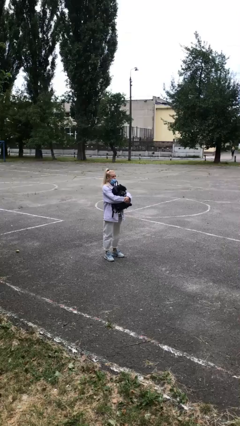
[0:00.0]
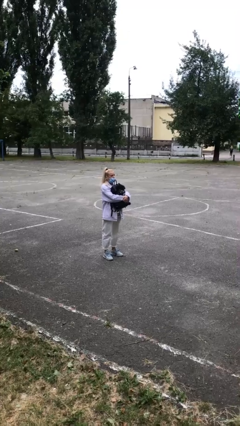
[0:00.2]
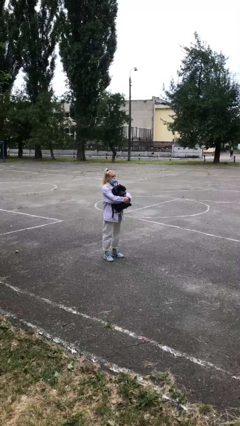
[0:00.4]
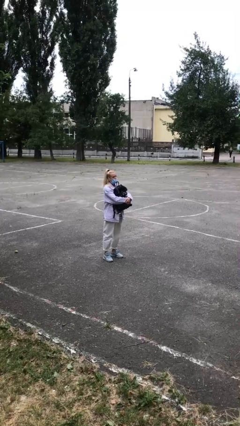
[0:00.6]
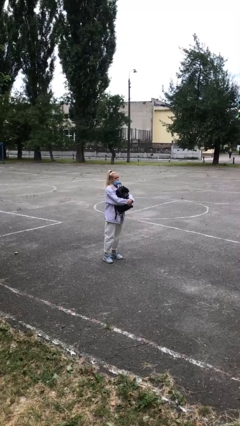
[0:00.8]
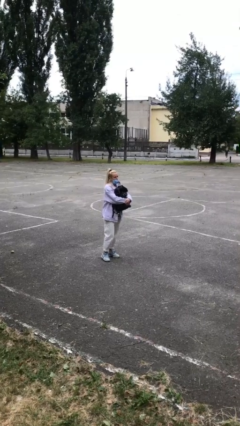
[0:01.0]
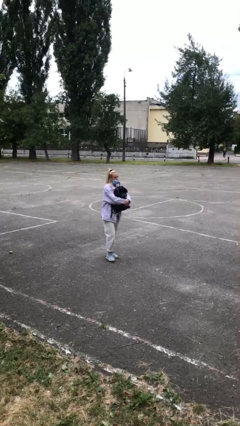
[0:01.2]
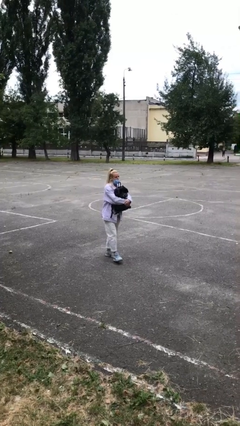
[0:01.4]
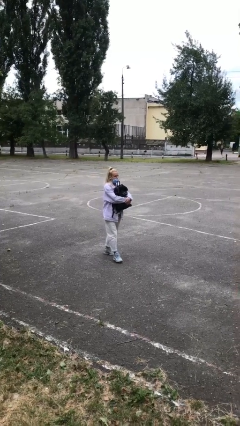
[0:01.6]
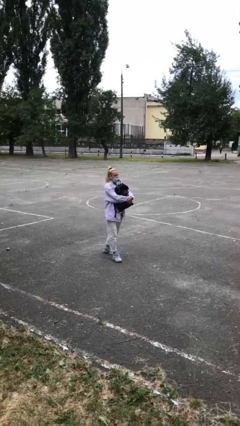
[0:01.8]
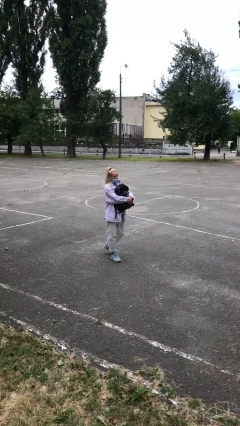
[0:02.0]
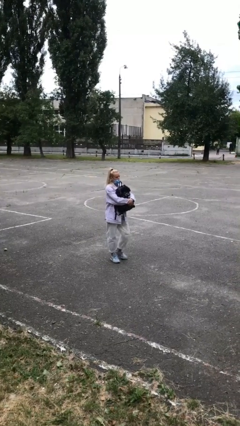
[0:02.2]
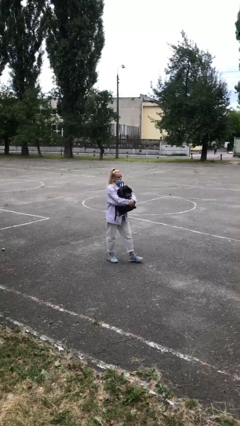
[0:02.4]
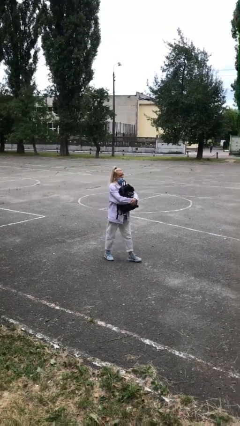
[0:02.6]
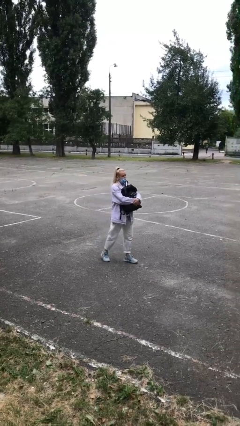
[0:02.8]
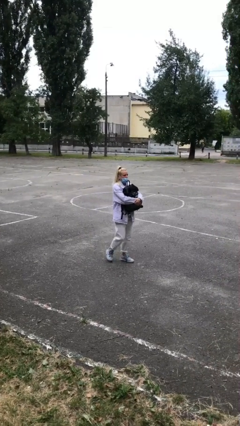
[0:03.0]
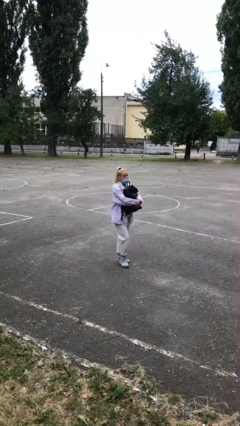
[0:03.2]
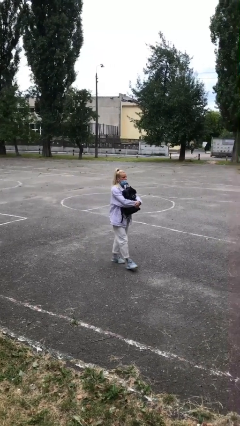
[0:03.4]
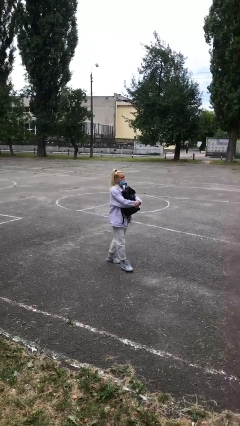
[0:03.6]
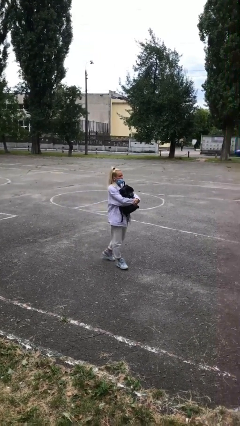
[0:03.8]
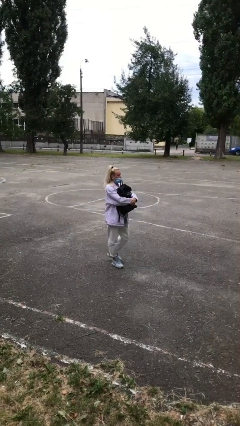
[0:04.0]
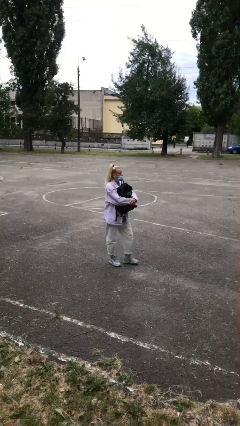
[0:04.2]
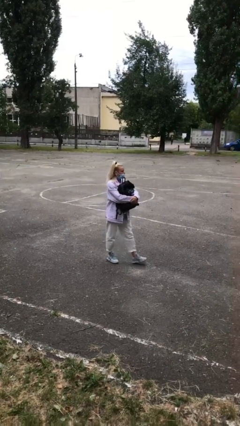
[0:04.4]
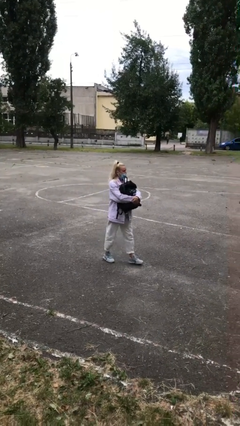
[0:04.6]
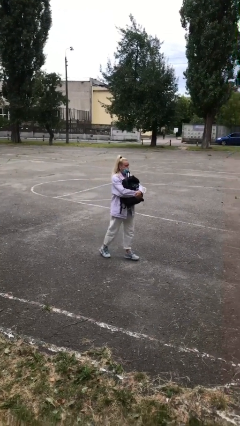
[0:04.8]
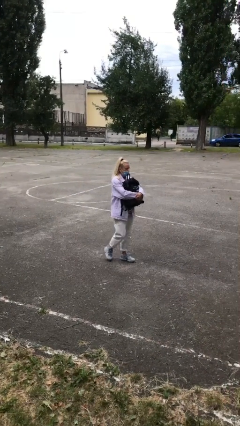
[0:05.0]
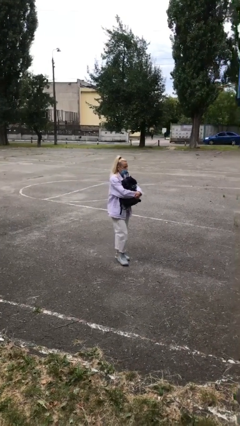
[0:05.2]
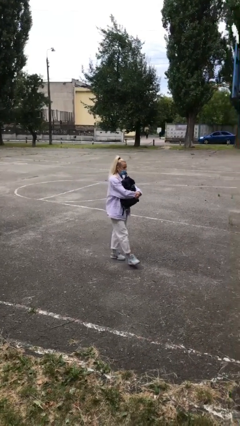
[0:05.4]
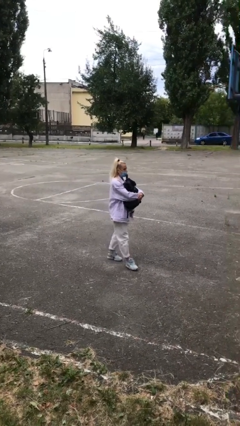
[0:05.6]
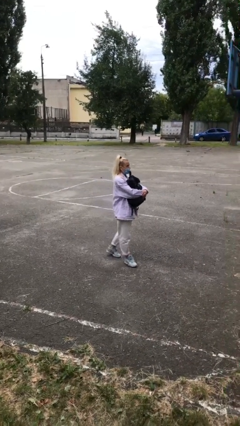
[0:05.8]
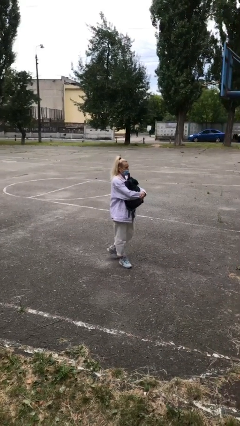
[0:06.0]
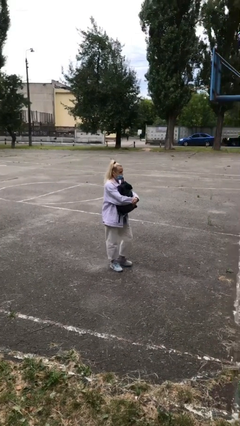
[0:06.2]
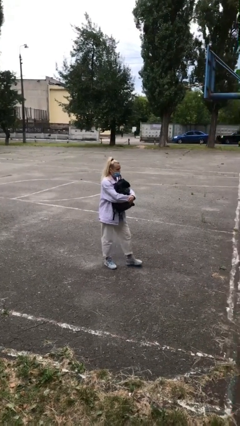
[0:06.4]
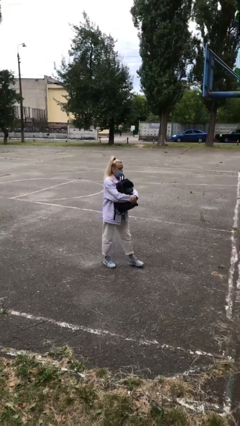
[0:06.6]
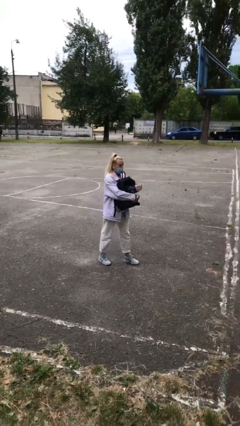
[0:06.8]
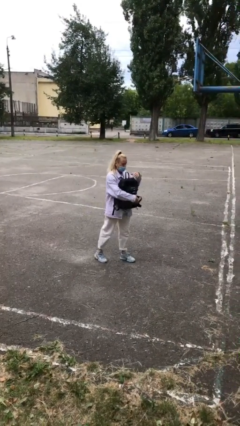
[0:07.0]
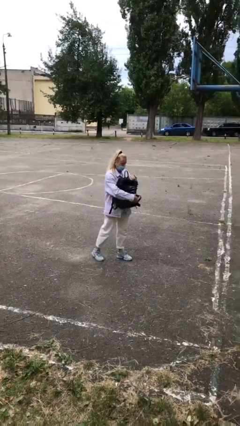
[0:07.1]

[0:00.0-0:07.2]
person carries heavy object

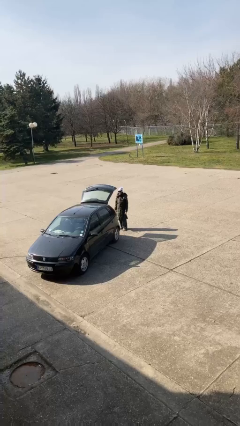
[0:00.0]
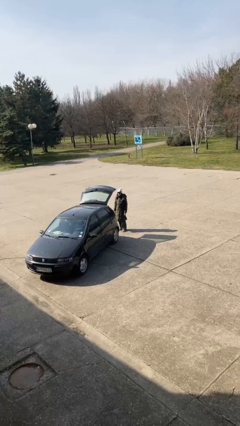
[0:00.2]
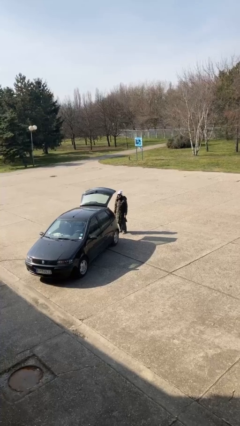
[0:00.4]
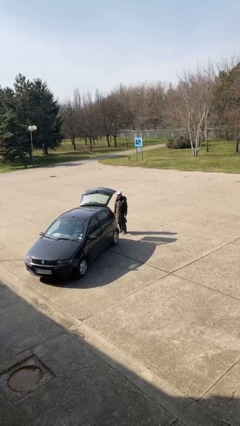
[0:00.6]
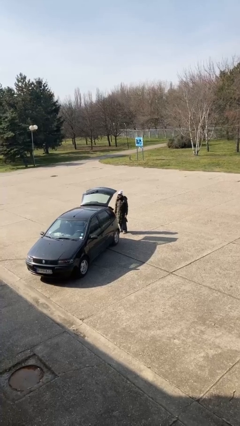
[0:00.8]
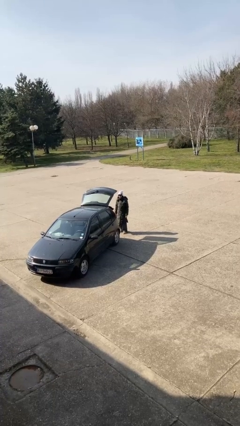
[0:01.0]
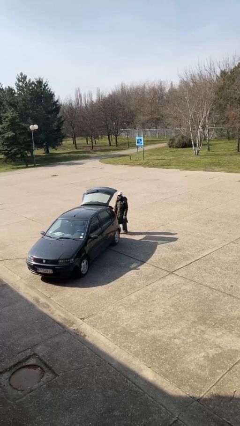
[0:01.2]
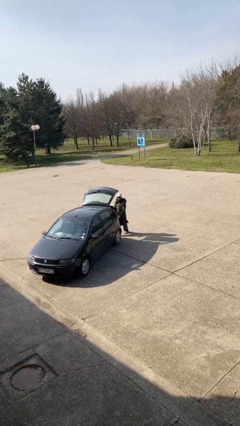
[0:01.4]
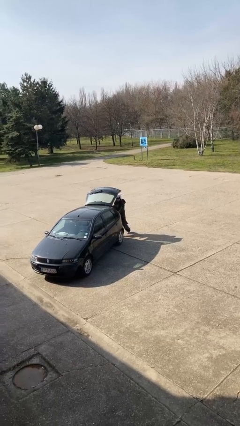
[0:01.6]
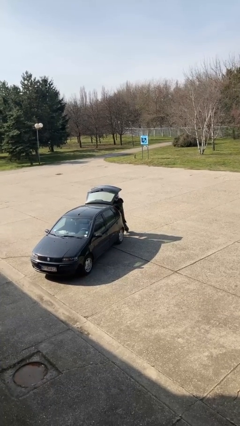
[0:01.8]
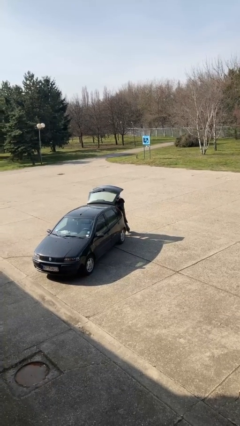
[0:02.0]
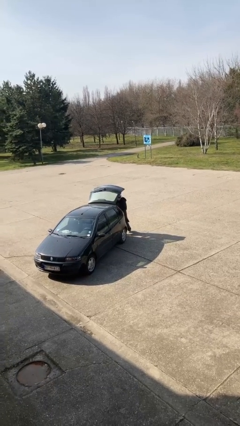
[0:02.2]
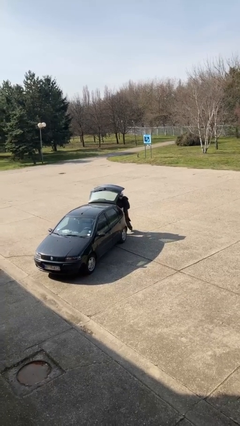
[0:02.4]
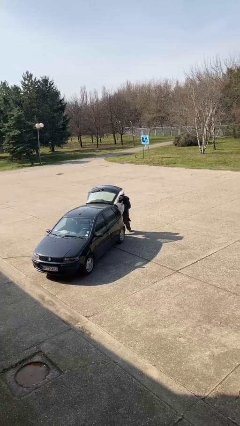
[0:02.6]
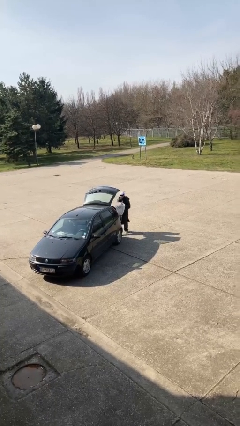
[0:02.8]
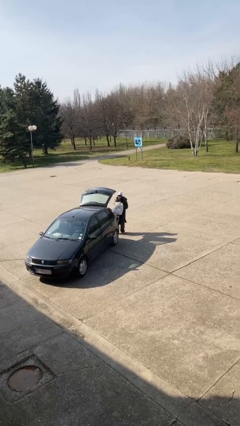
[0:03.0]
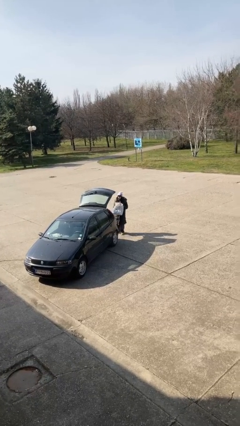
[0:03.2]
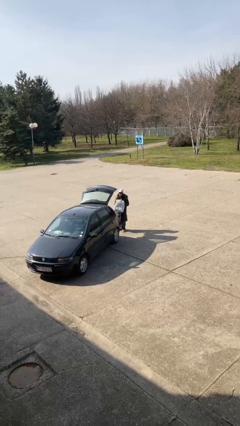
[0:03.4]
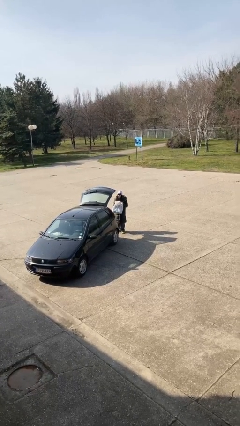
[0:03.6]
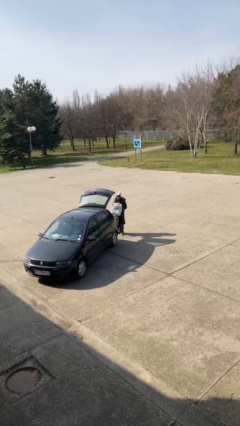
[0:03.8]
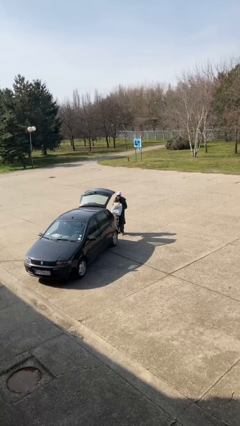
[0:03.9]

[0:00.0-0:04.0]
person unloads car

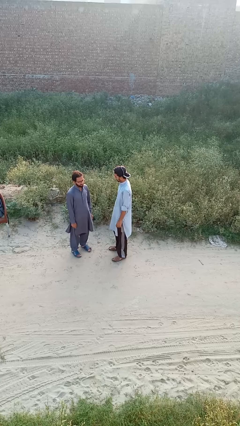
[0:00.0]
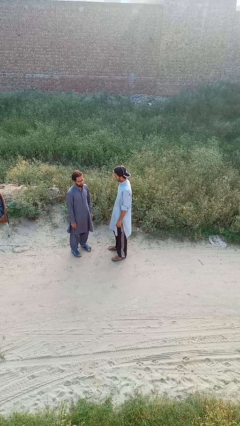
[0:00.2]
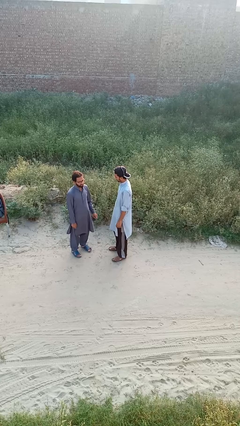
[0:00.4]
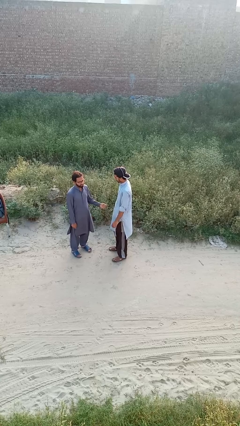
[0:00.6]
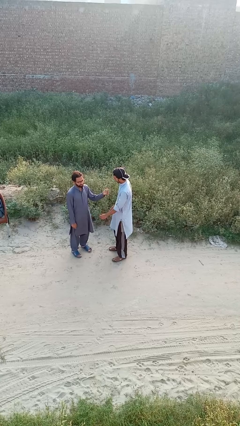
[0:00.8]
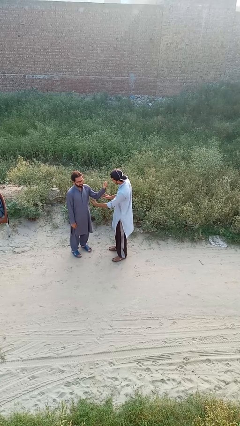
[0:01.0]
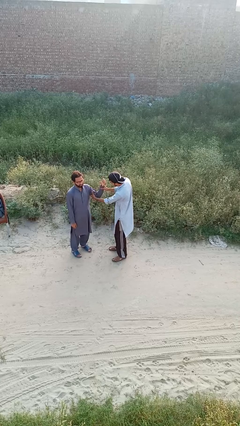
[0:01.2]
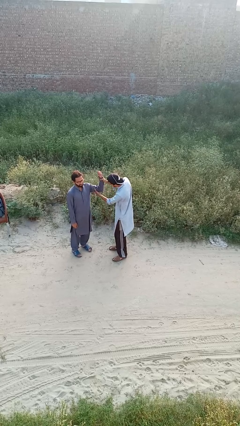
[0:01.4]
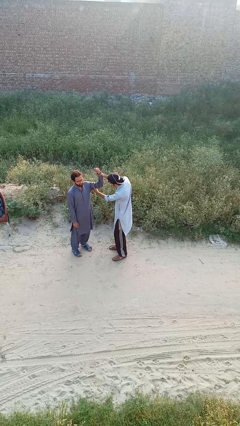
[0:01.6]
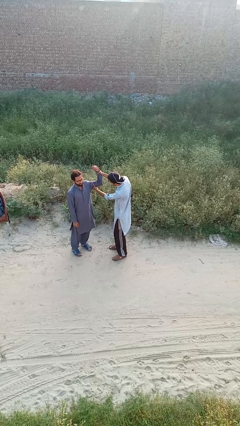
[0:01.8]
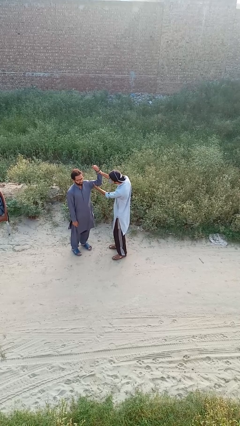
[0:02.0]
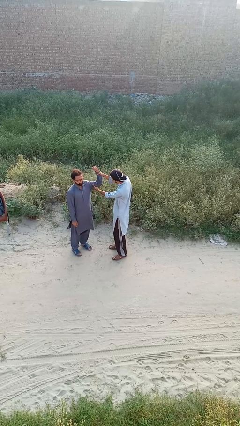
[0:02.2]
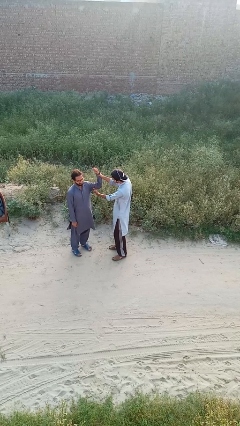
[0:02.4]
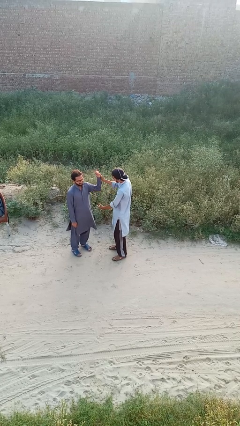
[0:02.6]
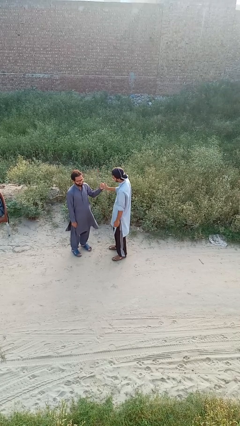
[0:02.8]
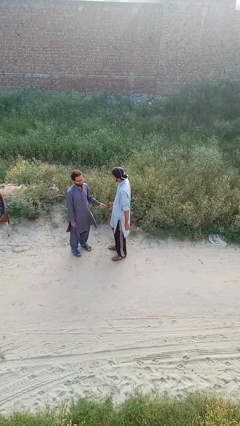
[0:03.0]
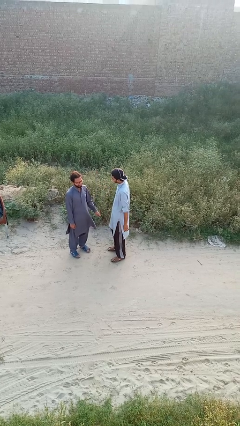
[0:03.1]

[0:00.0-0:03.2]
person grabs person by bicep

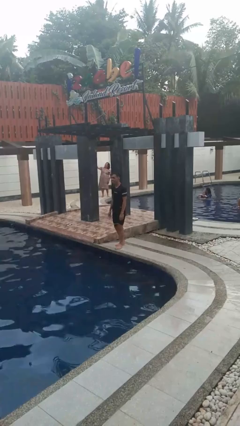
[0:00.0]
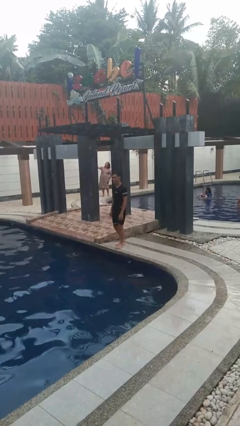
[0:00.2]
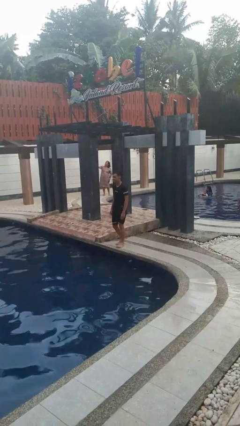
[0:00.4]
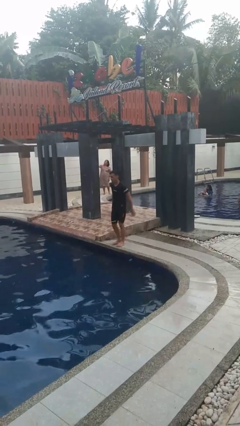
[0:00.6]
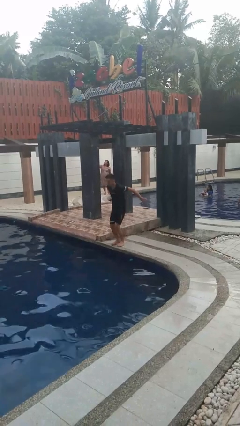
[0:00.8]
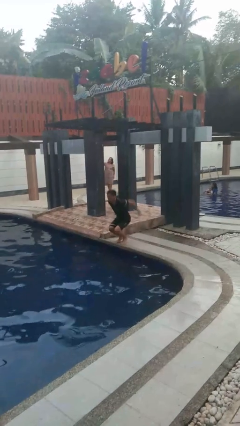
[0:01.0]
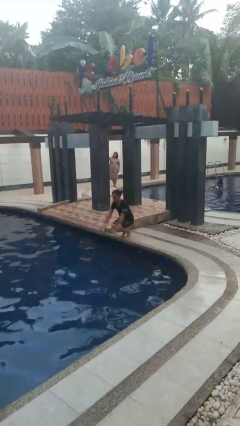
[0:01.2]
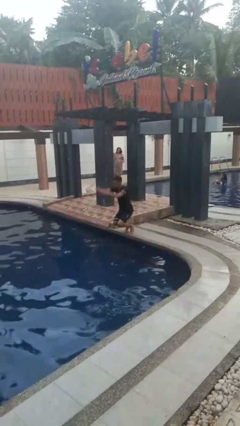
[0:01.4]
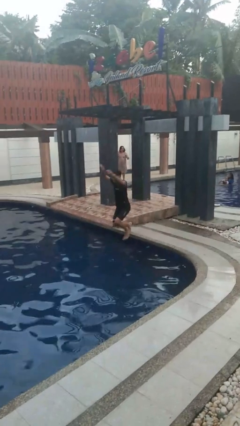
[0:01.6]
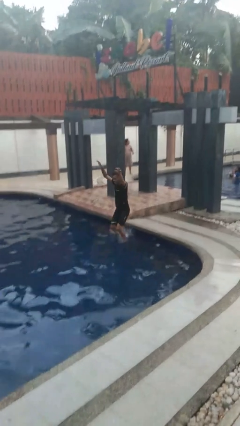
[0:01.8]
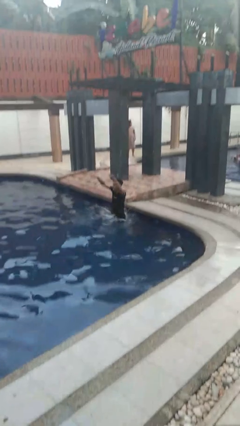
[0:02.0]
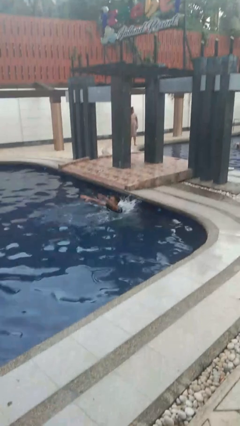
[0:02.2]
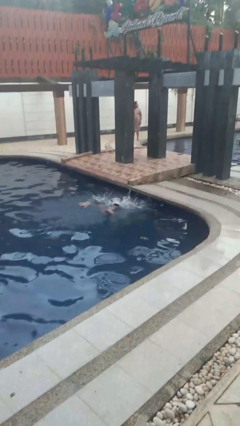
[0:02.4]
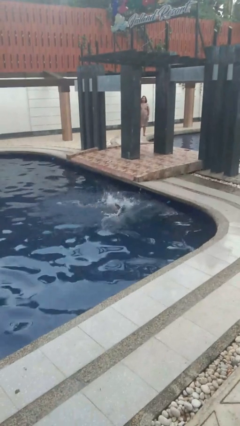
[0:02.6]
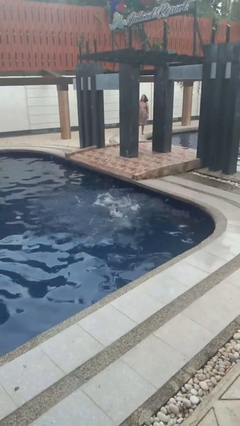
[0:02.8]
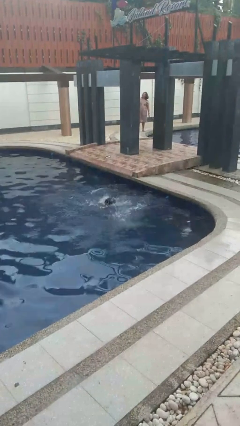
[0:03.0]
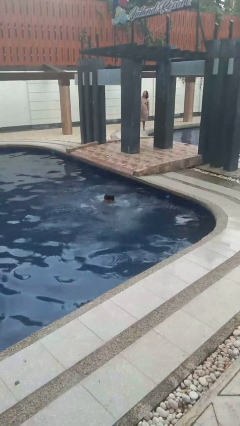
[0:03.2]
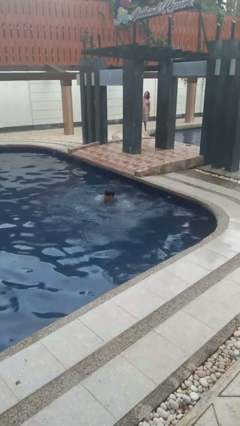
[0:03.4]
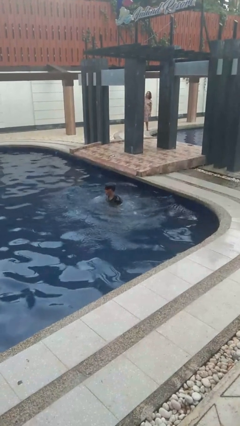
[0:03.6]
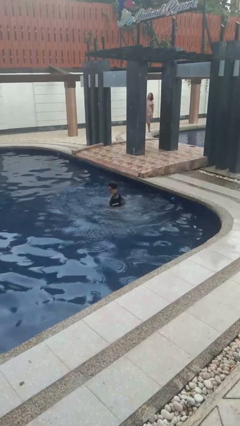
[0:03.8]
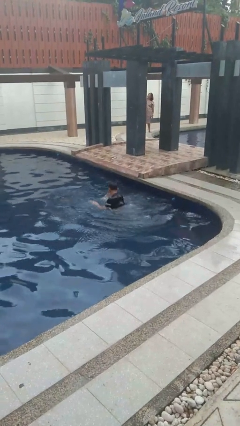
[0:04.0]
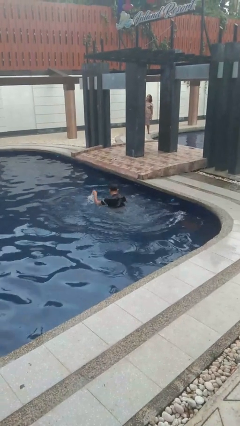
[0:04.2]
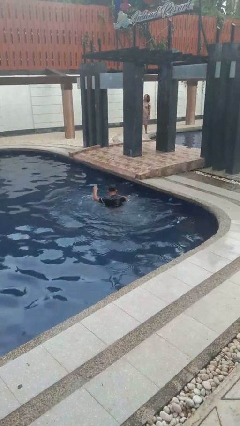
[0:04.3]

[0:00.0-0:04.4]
person jumps into pool
